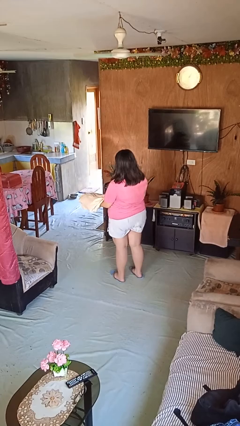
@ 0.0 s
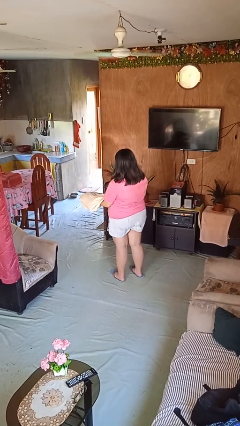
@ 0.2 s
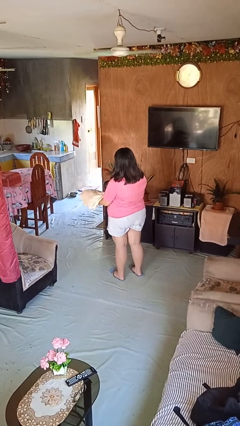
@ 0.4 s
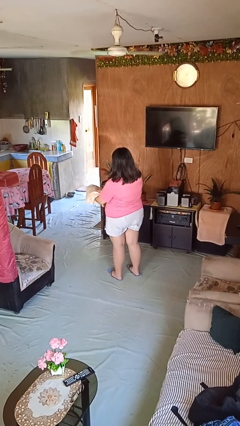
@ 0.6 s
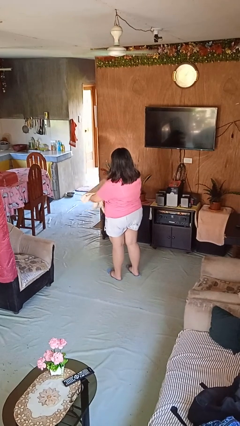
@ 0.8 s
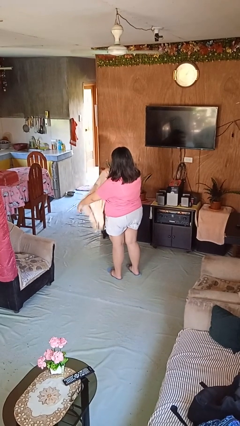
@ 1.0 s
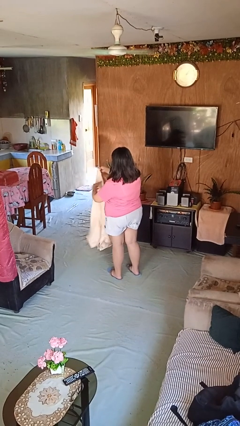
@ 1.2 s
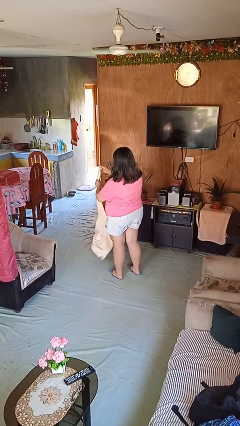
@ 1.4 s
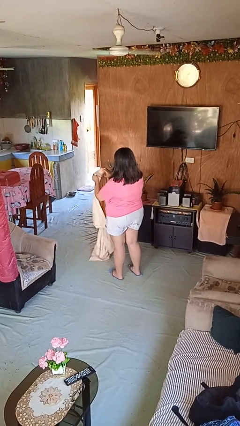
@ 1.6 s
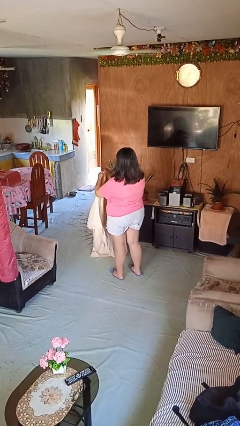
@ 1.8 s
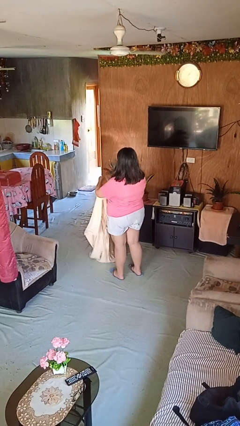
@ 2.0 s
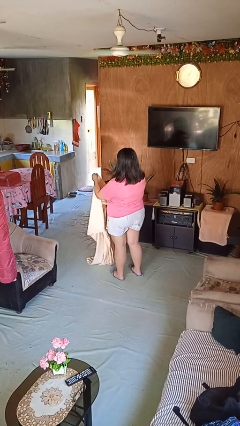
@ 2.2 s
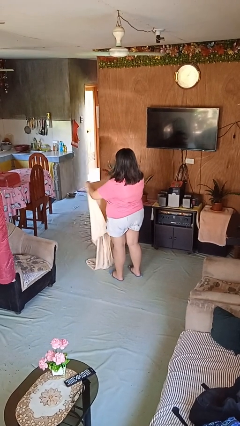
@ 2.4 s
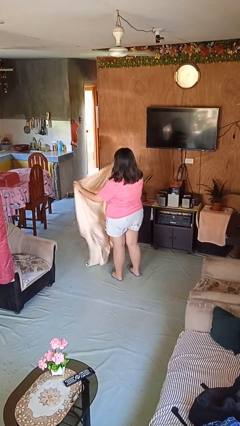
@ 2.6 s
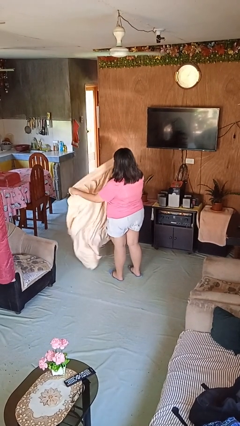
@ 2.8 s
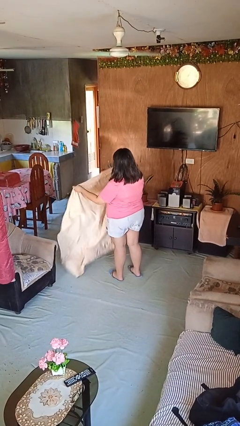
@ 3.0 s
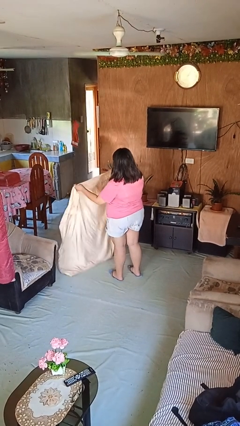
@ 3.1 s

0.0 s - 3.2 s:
person unfolds blanket

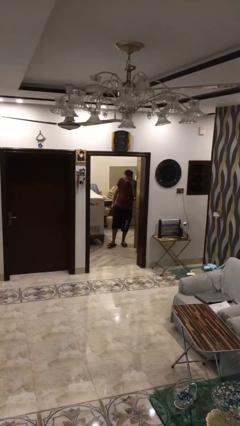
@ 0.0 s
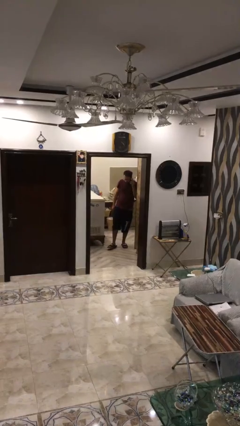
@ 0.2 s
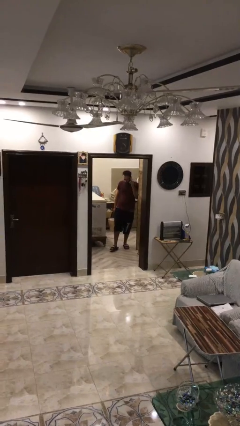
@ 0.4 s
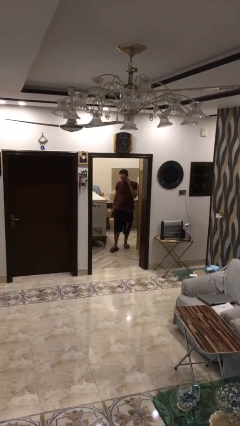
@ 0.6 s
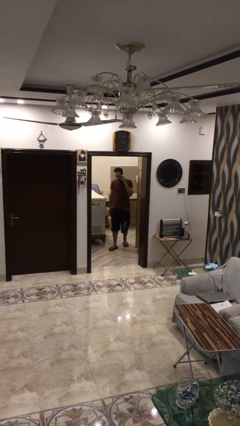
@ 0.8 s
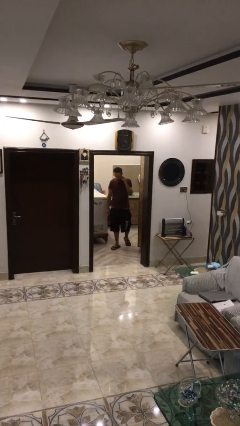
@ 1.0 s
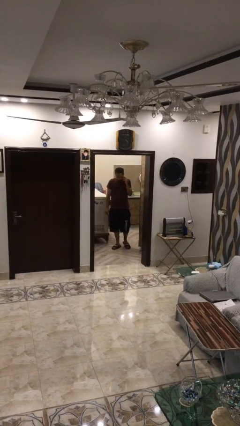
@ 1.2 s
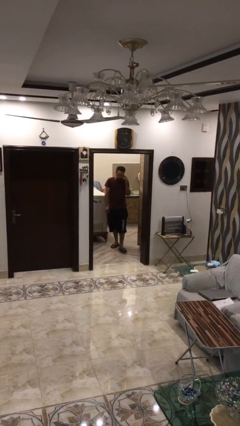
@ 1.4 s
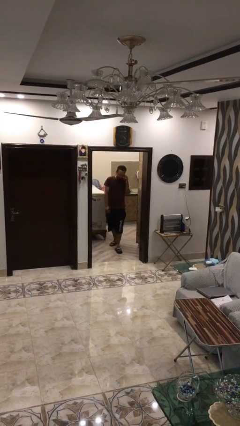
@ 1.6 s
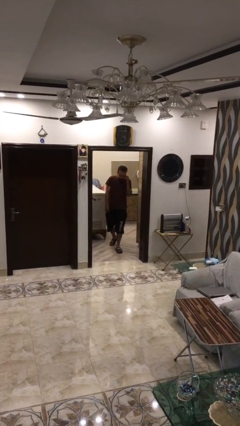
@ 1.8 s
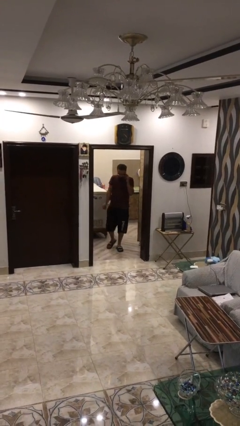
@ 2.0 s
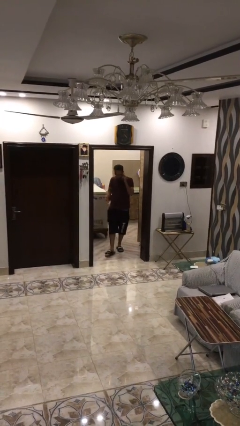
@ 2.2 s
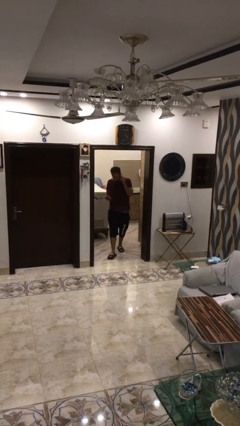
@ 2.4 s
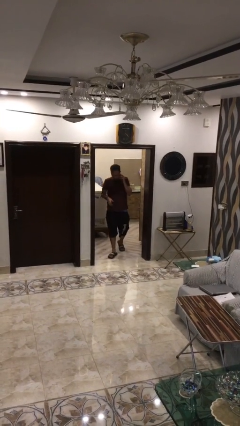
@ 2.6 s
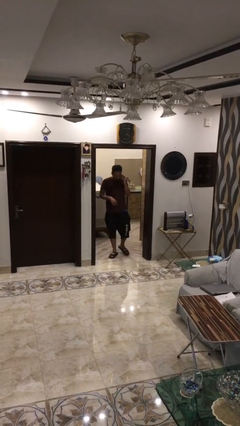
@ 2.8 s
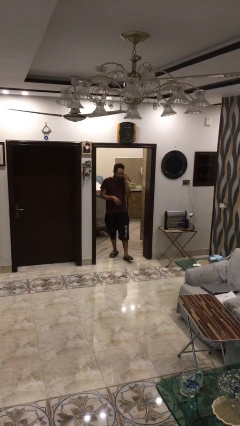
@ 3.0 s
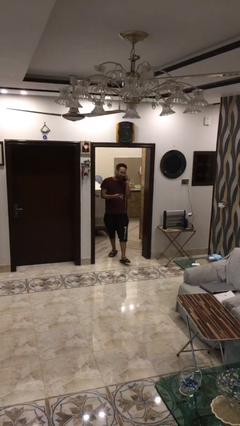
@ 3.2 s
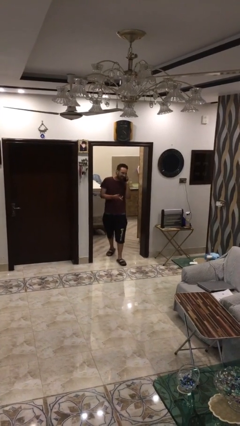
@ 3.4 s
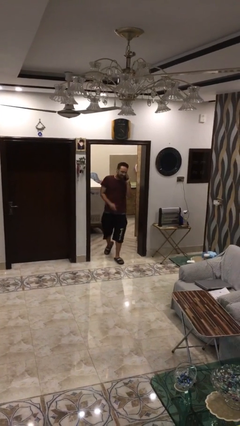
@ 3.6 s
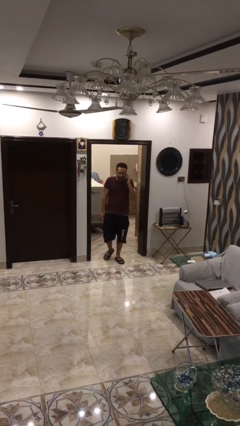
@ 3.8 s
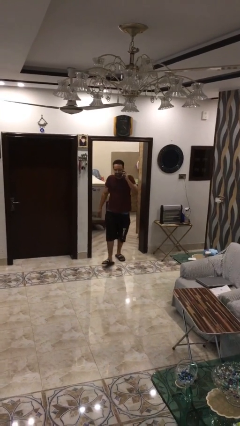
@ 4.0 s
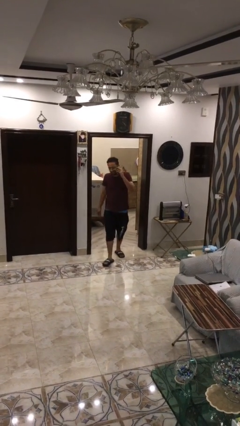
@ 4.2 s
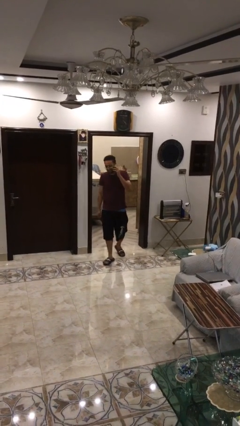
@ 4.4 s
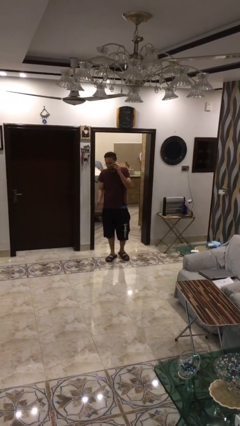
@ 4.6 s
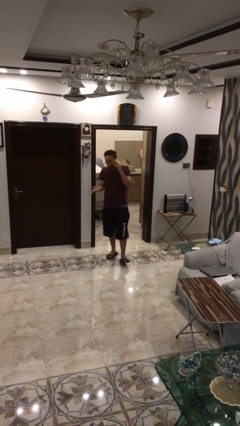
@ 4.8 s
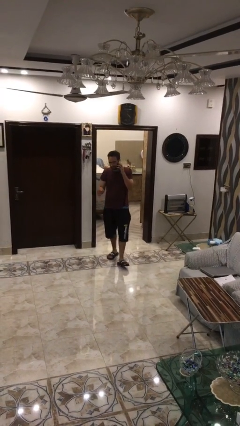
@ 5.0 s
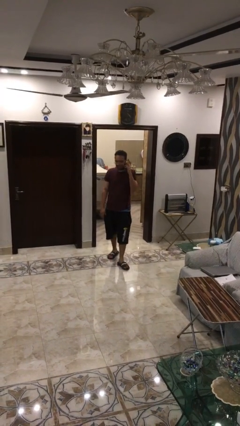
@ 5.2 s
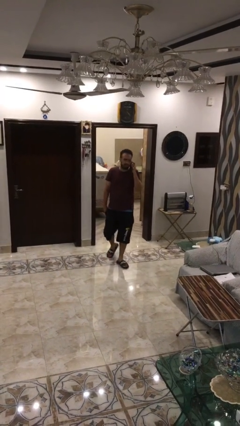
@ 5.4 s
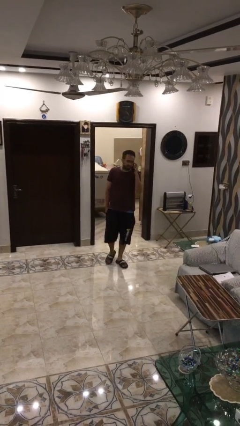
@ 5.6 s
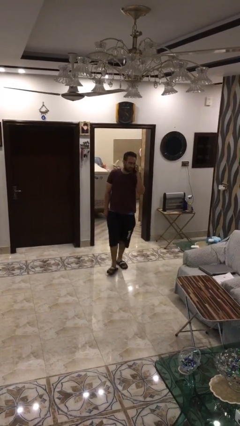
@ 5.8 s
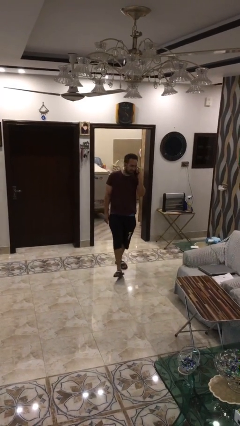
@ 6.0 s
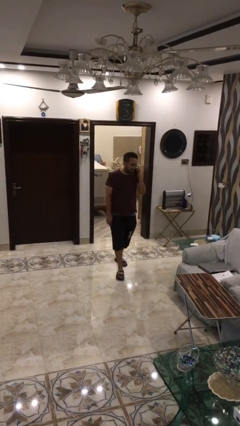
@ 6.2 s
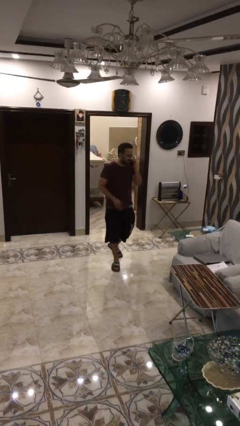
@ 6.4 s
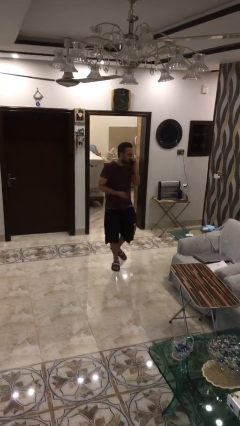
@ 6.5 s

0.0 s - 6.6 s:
person enters scene through structure

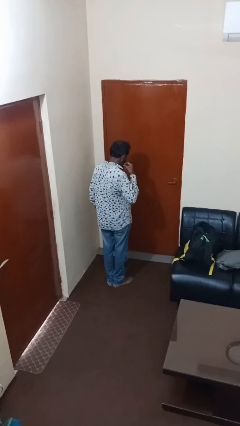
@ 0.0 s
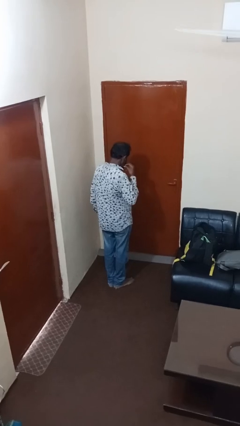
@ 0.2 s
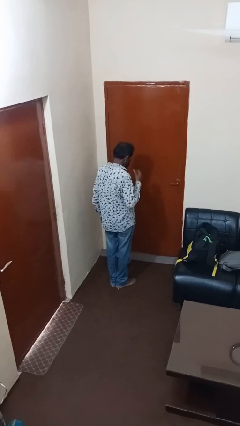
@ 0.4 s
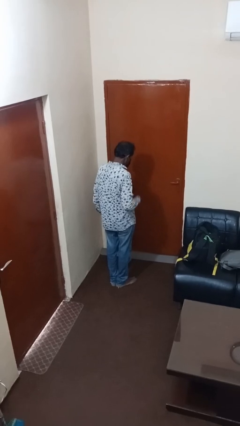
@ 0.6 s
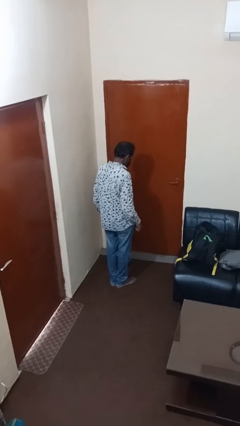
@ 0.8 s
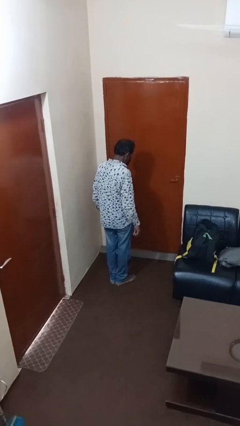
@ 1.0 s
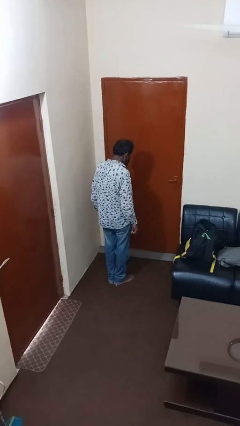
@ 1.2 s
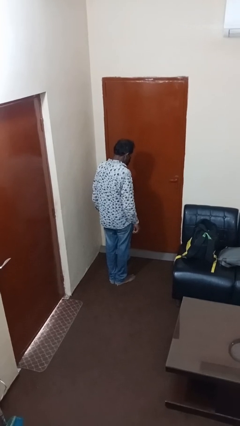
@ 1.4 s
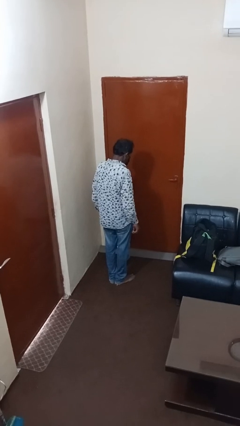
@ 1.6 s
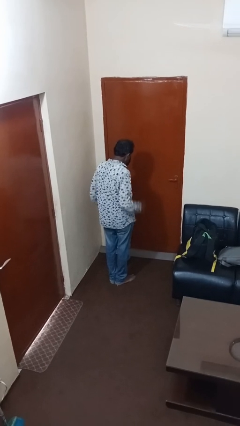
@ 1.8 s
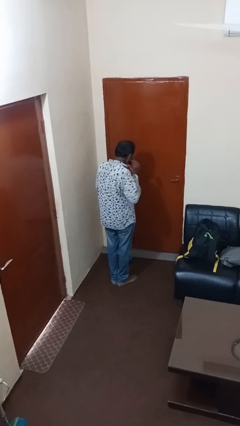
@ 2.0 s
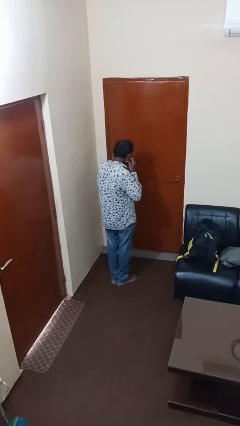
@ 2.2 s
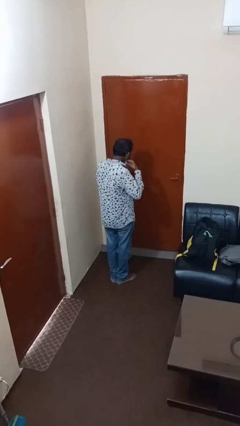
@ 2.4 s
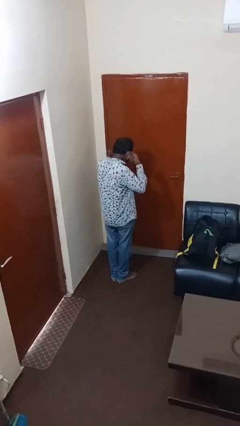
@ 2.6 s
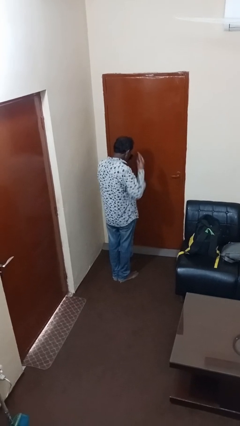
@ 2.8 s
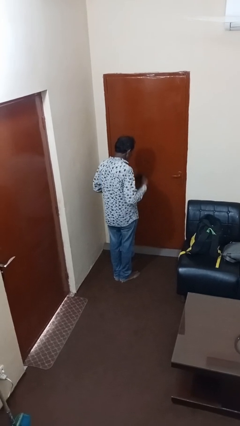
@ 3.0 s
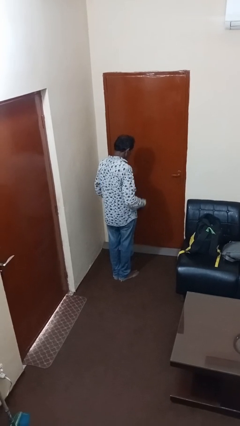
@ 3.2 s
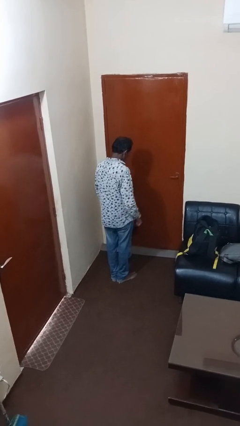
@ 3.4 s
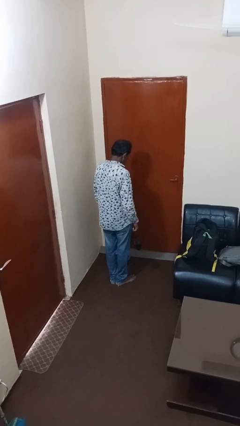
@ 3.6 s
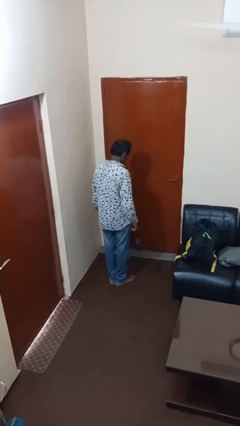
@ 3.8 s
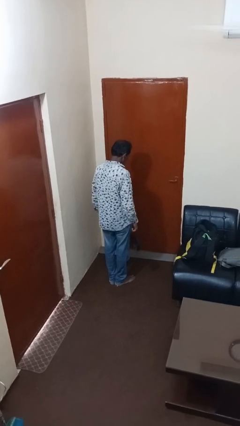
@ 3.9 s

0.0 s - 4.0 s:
person takes off facemask

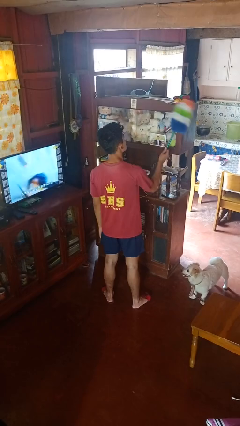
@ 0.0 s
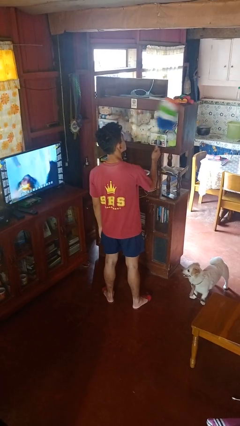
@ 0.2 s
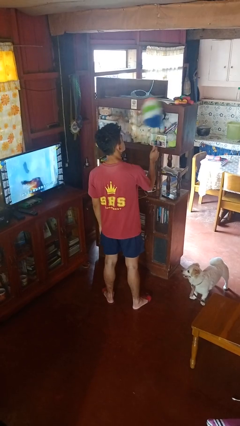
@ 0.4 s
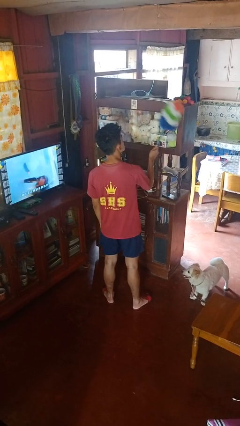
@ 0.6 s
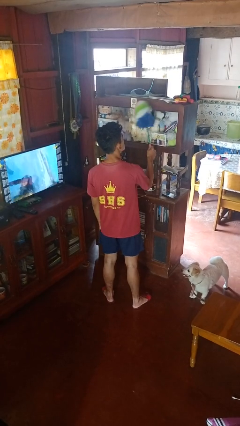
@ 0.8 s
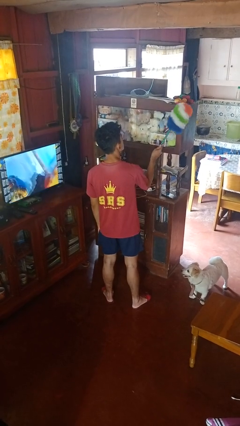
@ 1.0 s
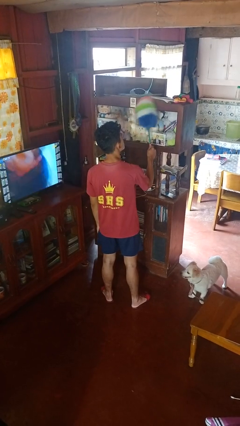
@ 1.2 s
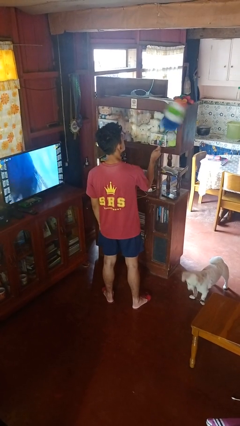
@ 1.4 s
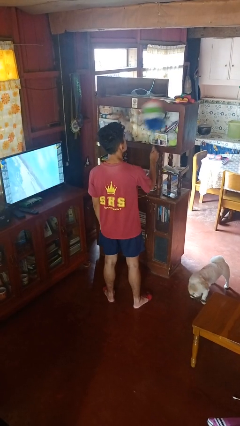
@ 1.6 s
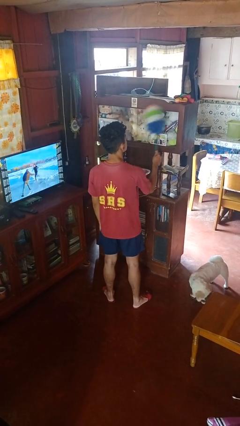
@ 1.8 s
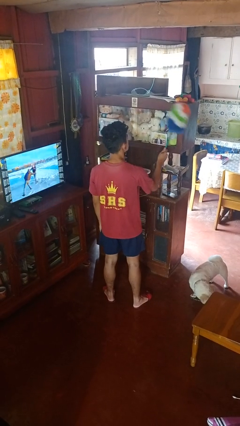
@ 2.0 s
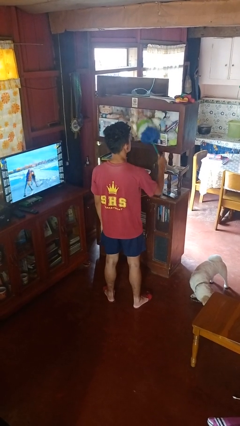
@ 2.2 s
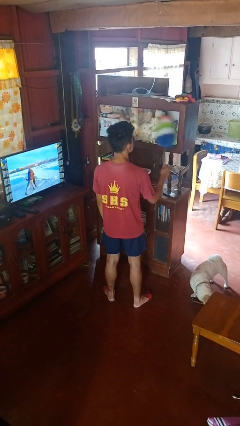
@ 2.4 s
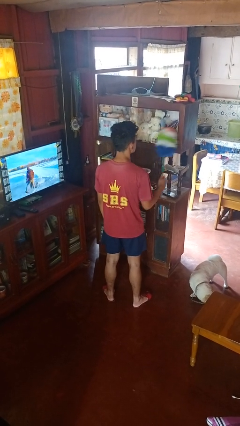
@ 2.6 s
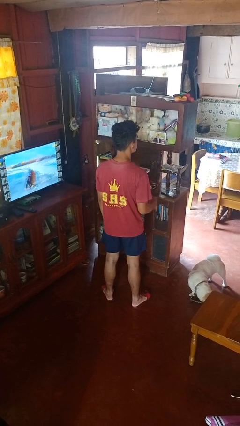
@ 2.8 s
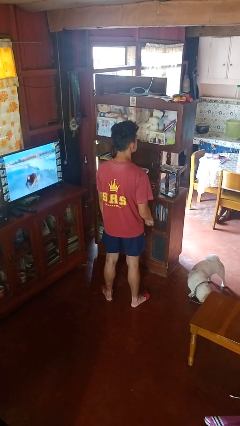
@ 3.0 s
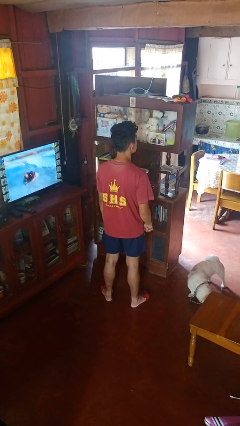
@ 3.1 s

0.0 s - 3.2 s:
person dusts furniture

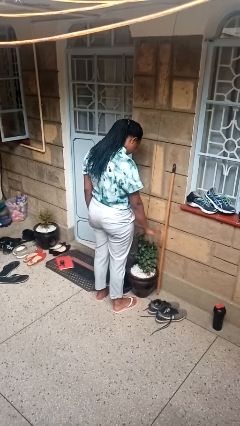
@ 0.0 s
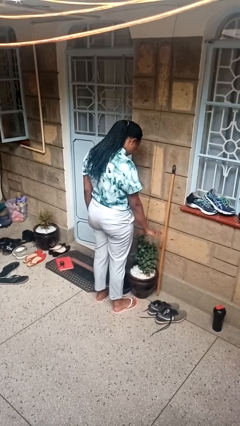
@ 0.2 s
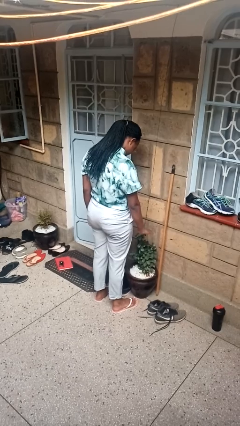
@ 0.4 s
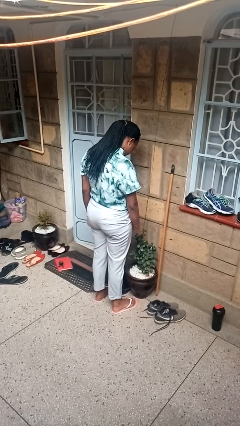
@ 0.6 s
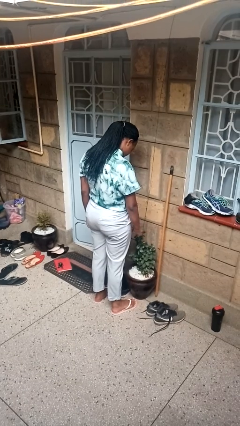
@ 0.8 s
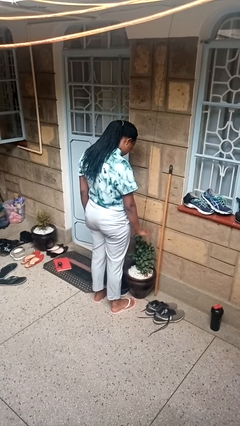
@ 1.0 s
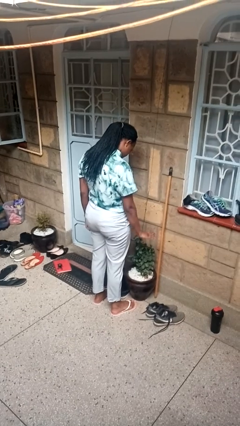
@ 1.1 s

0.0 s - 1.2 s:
person waves hand over object
